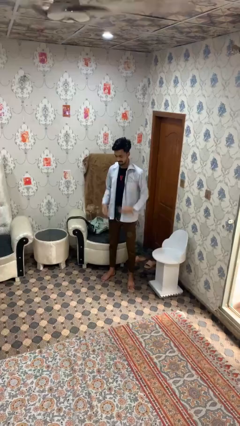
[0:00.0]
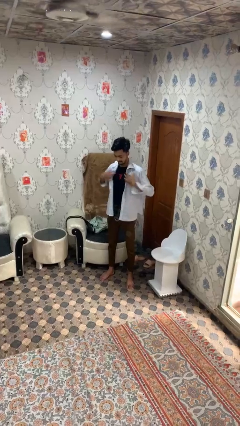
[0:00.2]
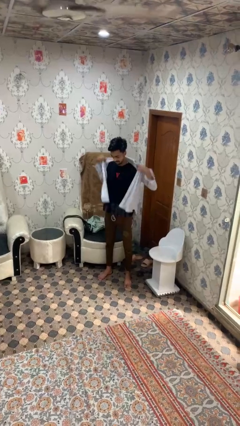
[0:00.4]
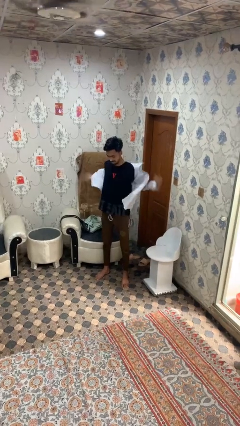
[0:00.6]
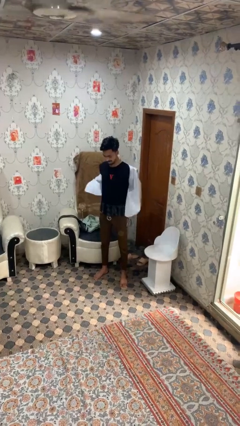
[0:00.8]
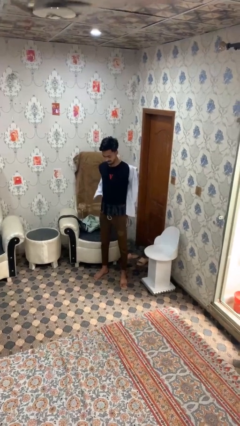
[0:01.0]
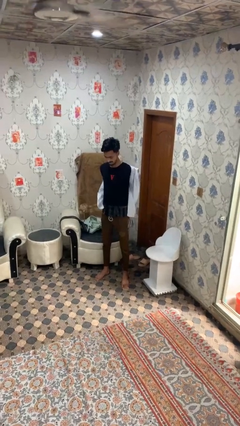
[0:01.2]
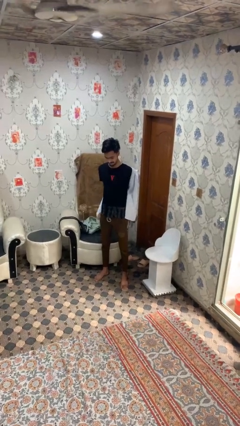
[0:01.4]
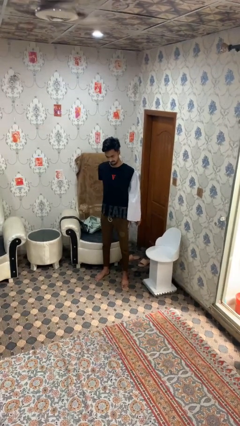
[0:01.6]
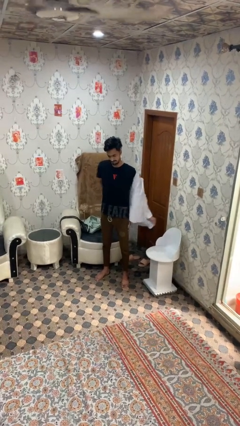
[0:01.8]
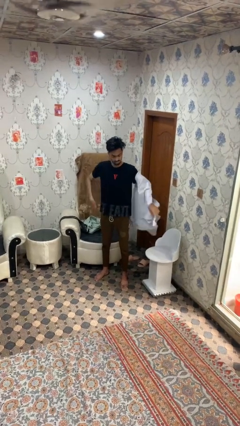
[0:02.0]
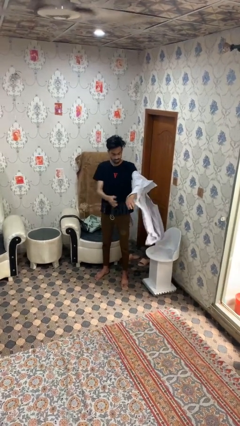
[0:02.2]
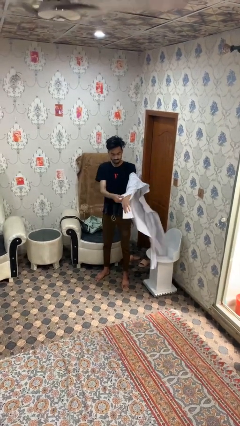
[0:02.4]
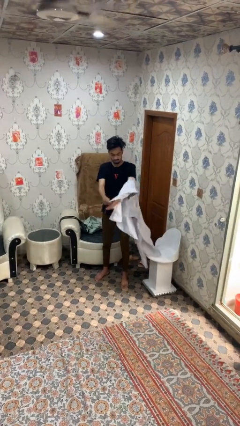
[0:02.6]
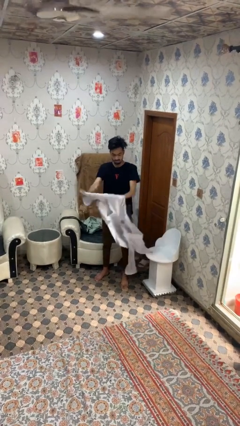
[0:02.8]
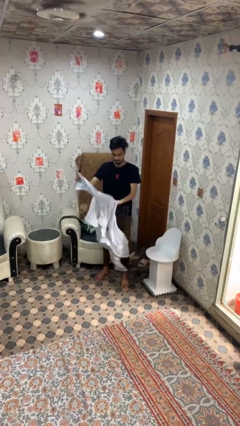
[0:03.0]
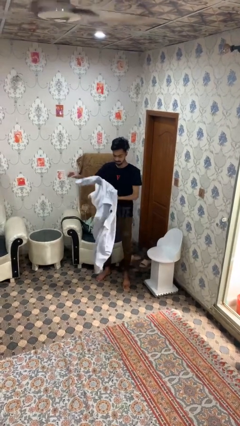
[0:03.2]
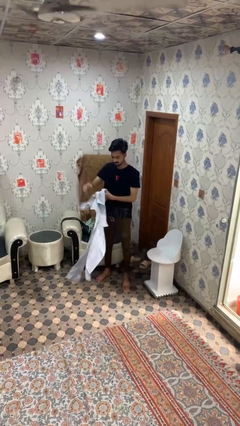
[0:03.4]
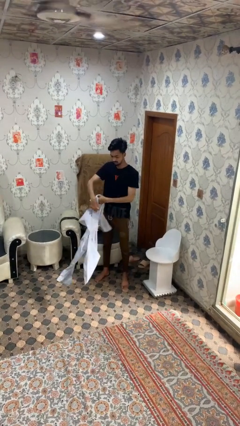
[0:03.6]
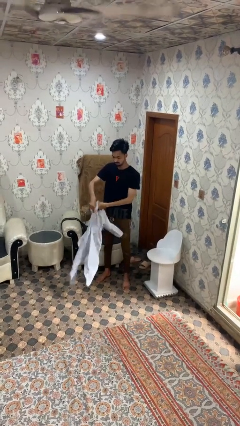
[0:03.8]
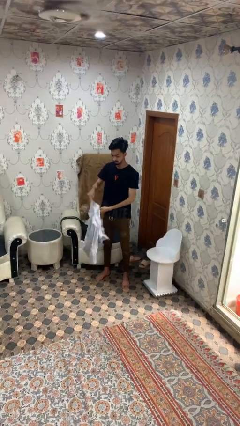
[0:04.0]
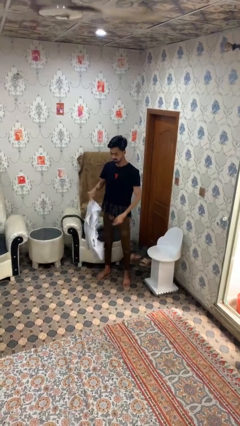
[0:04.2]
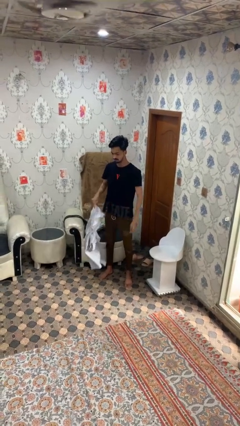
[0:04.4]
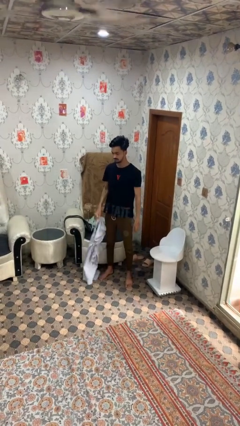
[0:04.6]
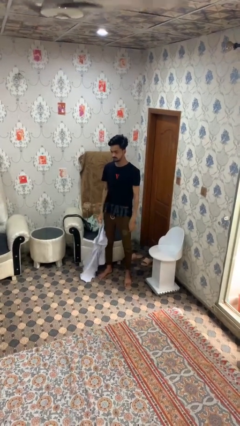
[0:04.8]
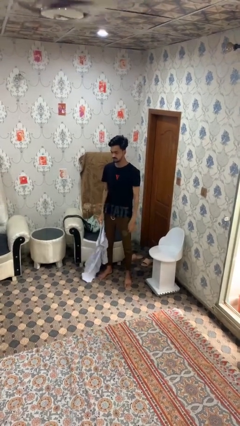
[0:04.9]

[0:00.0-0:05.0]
person takes off shirt

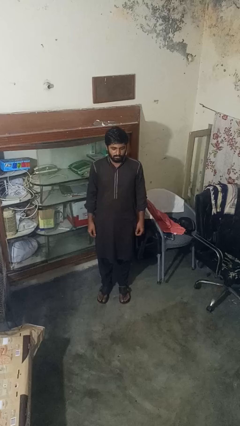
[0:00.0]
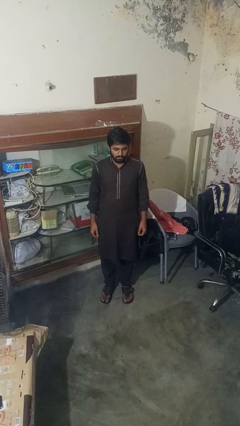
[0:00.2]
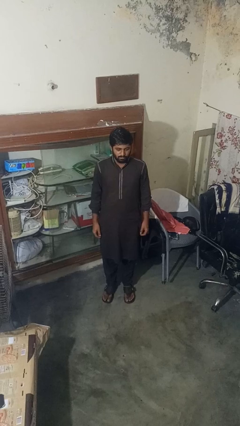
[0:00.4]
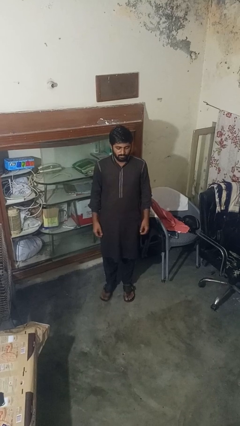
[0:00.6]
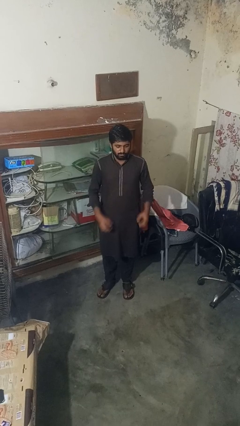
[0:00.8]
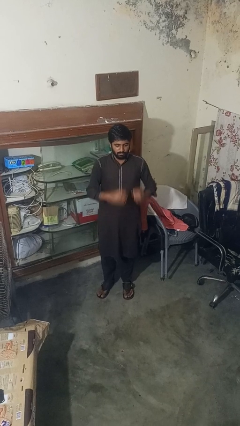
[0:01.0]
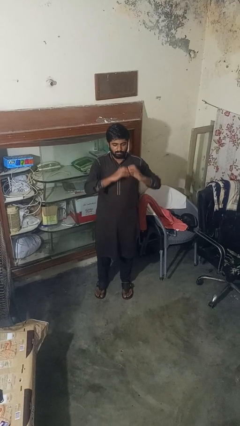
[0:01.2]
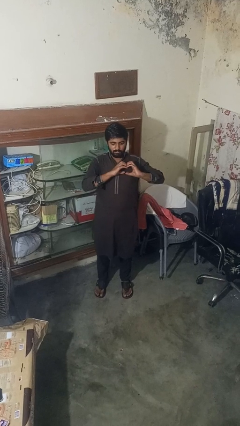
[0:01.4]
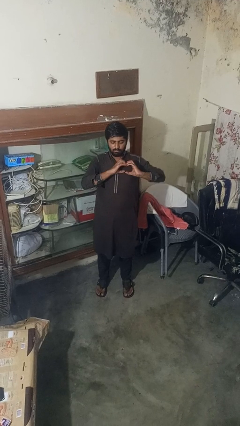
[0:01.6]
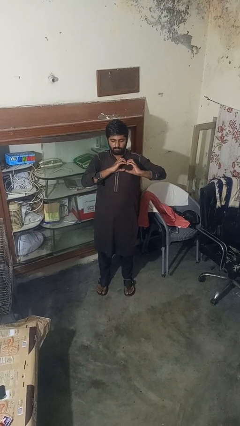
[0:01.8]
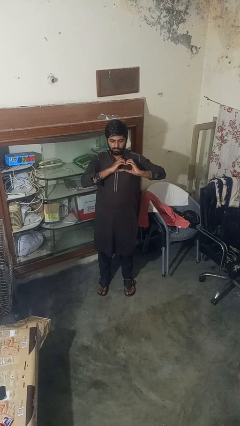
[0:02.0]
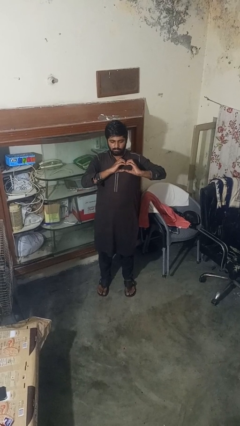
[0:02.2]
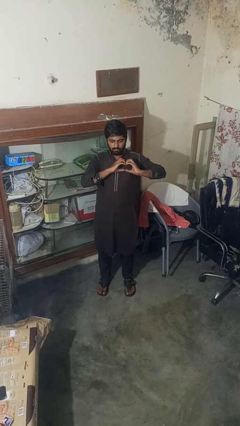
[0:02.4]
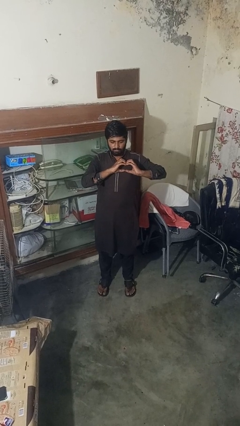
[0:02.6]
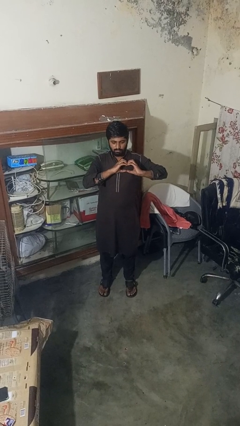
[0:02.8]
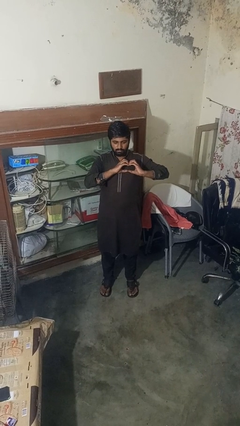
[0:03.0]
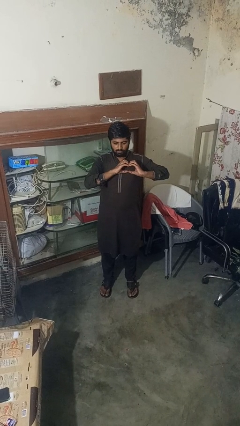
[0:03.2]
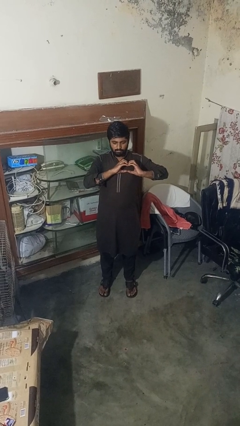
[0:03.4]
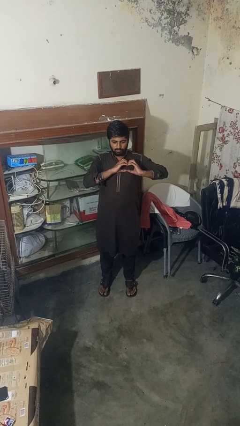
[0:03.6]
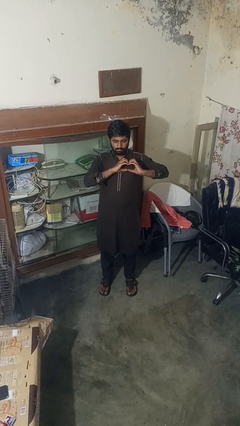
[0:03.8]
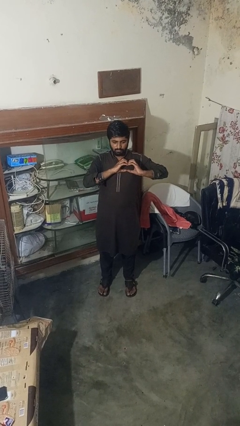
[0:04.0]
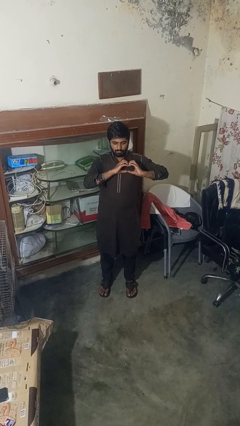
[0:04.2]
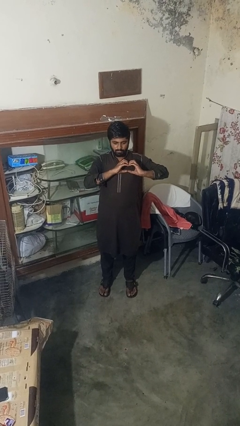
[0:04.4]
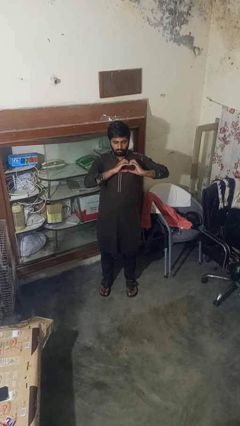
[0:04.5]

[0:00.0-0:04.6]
person gestures heart

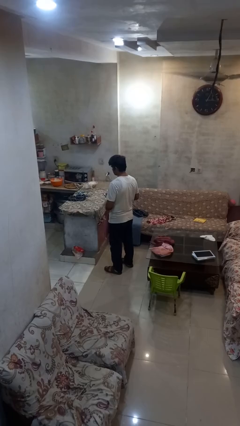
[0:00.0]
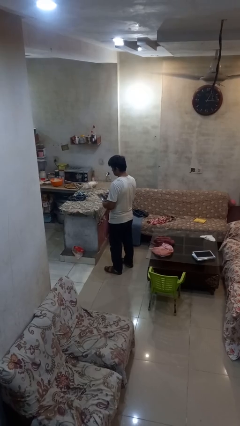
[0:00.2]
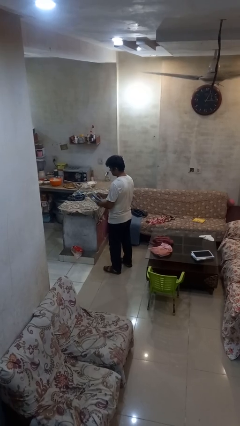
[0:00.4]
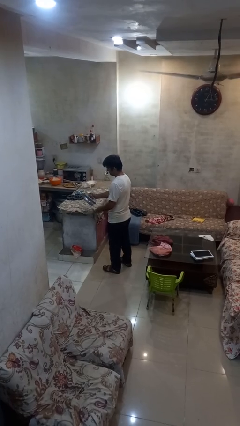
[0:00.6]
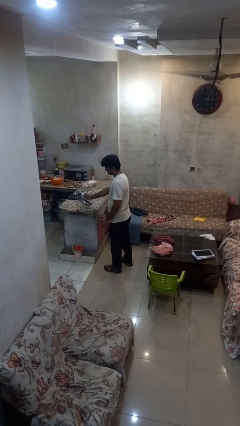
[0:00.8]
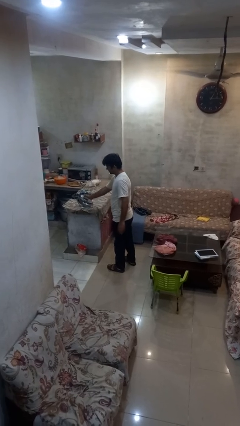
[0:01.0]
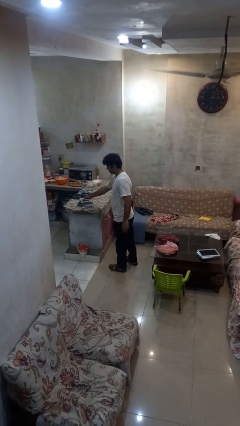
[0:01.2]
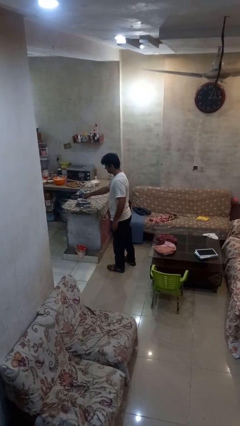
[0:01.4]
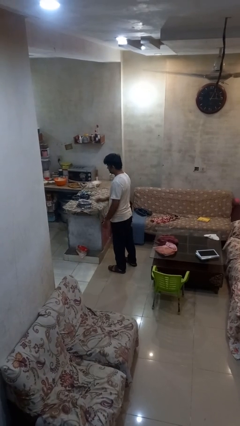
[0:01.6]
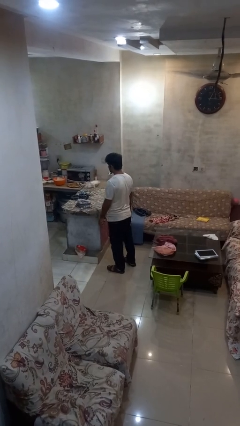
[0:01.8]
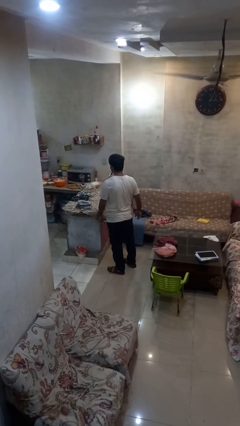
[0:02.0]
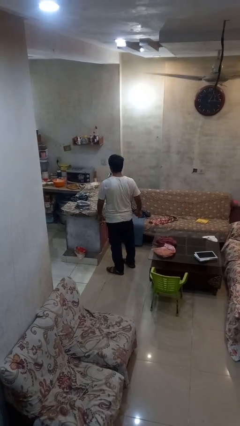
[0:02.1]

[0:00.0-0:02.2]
person puts down object on countertop

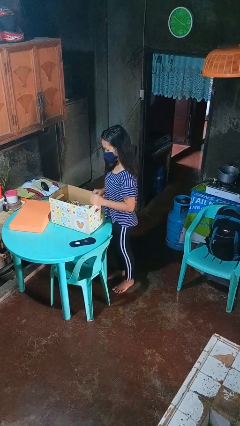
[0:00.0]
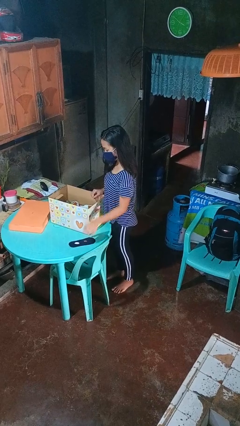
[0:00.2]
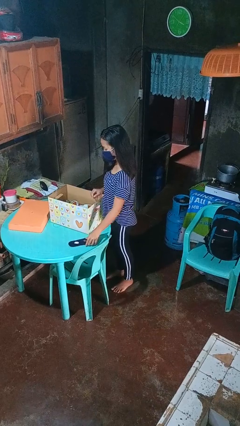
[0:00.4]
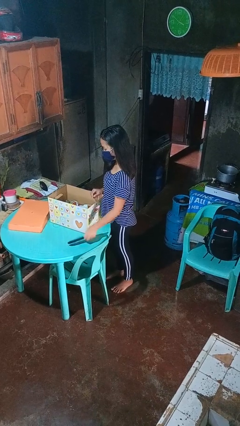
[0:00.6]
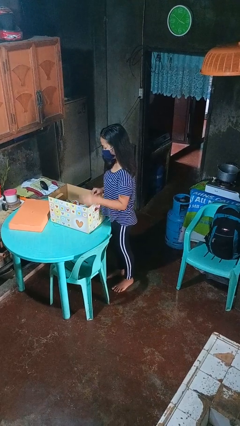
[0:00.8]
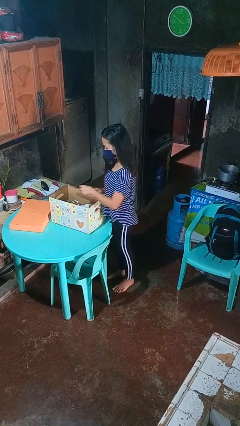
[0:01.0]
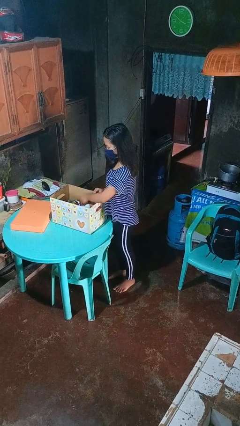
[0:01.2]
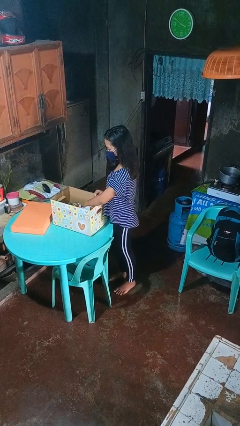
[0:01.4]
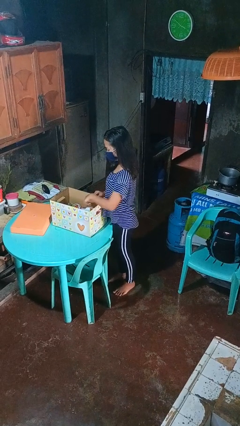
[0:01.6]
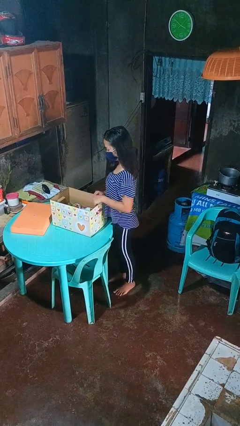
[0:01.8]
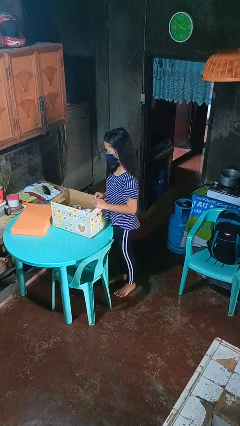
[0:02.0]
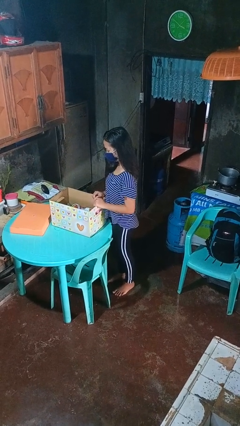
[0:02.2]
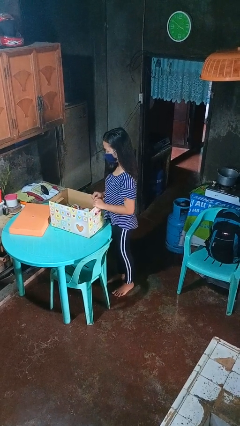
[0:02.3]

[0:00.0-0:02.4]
person puts object into box

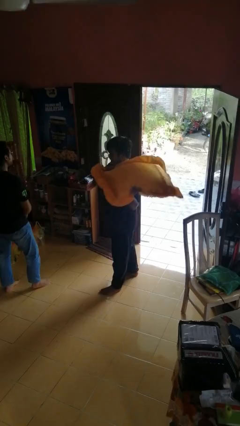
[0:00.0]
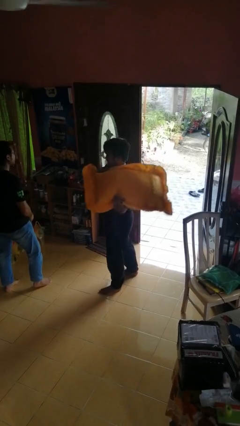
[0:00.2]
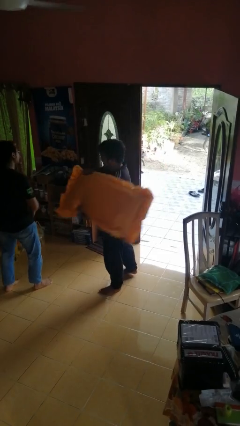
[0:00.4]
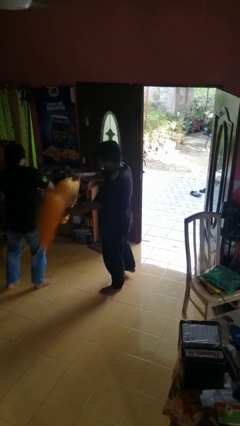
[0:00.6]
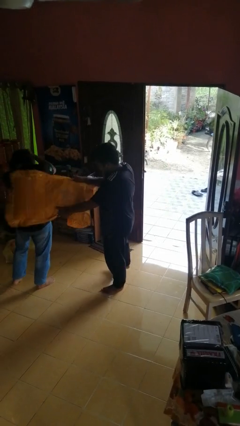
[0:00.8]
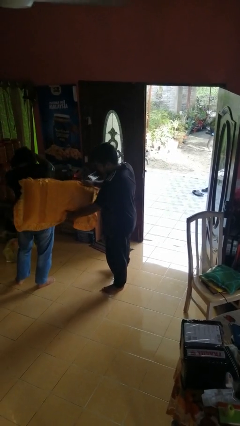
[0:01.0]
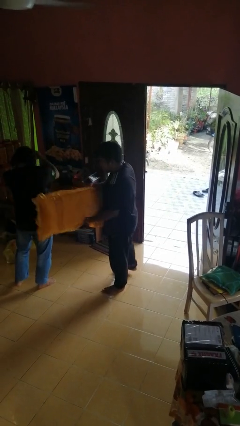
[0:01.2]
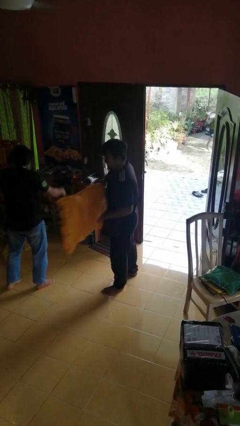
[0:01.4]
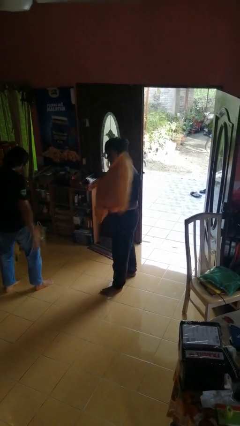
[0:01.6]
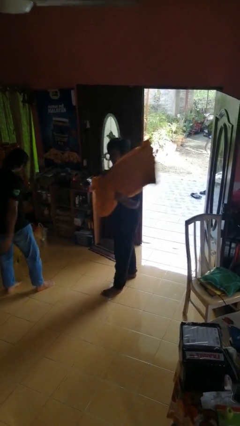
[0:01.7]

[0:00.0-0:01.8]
person hits person with pillow

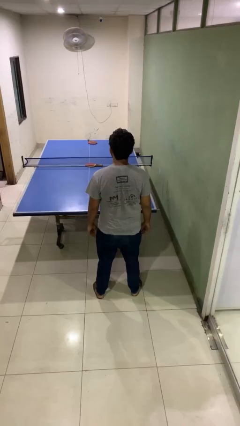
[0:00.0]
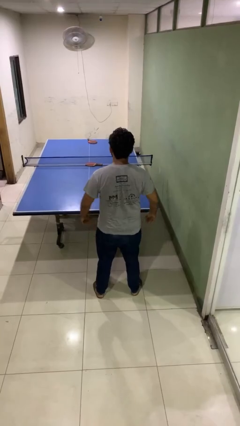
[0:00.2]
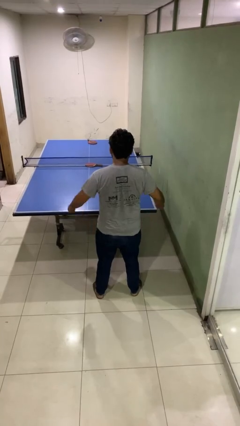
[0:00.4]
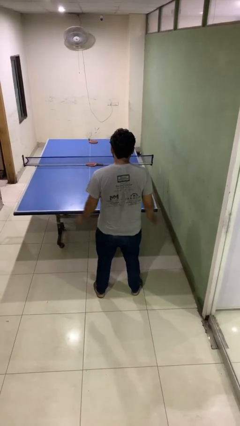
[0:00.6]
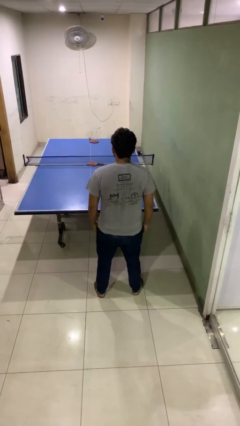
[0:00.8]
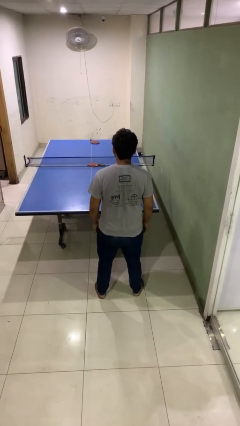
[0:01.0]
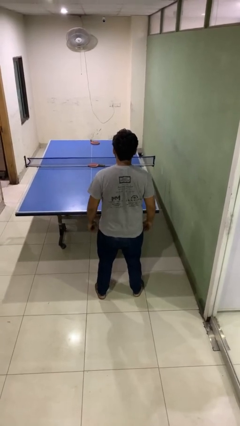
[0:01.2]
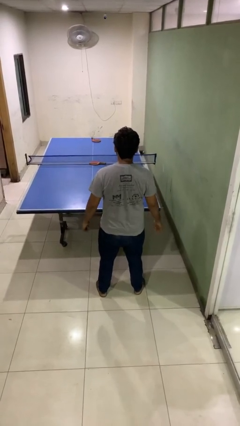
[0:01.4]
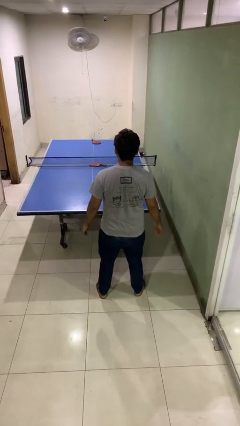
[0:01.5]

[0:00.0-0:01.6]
person slaps hands on thighs

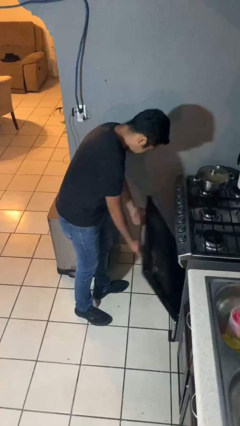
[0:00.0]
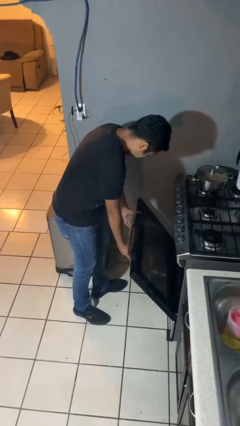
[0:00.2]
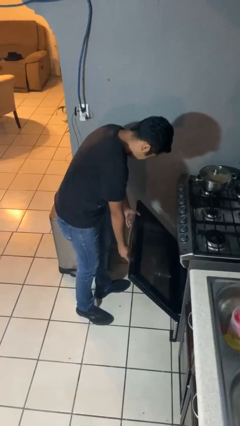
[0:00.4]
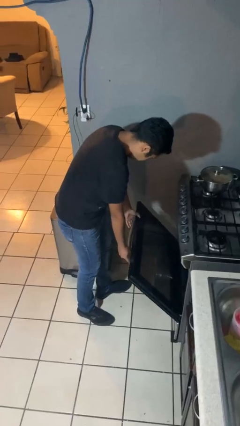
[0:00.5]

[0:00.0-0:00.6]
person opens oven door
